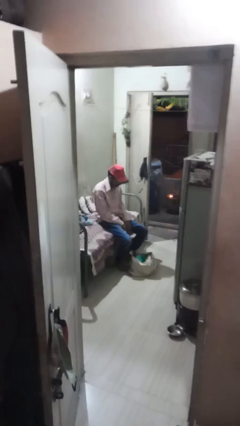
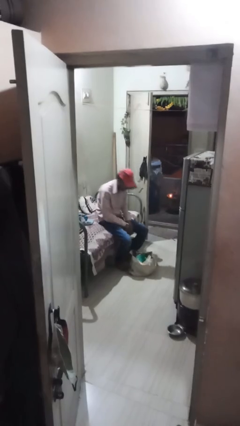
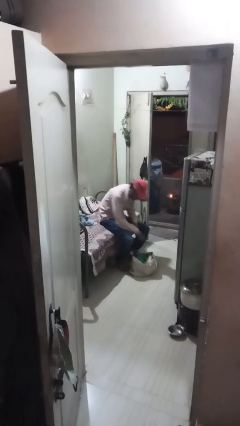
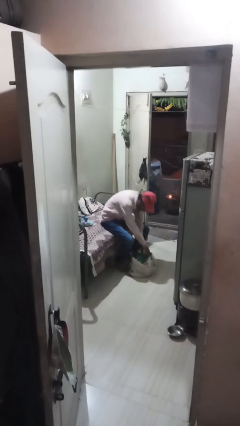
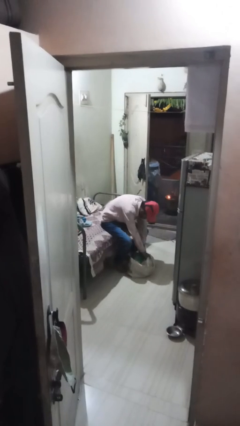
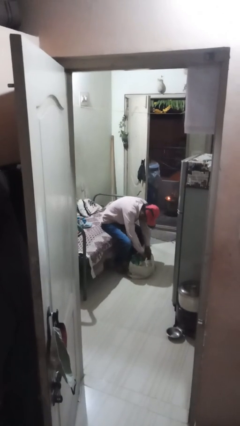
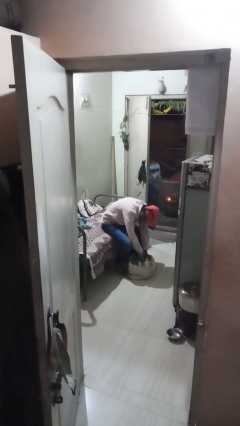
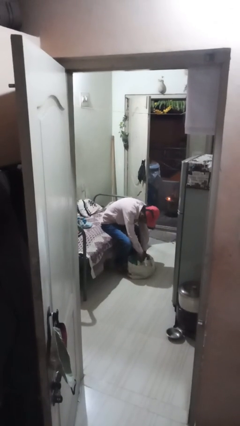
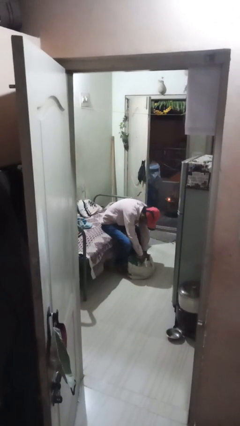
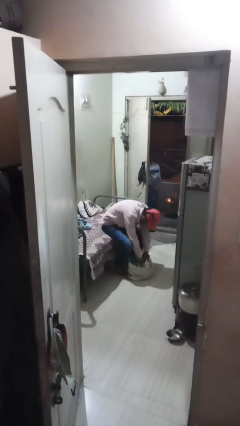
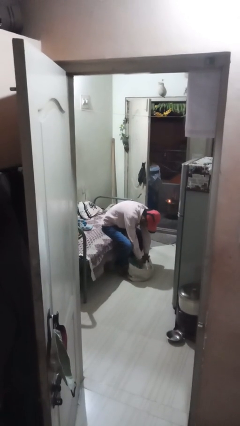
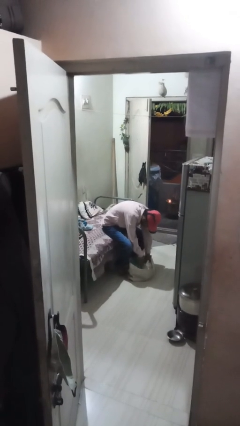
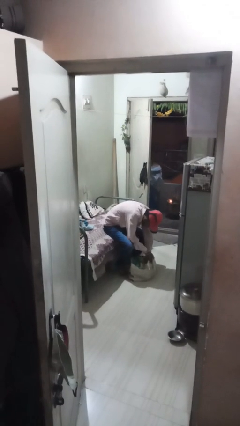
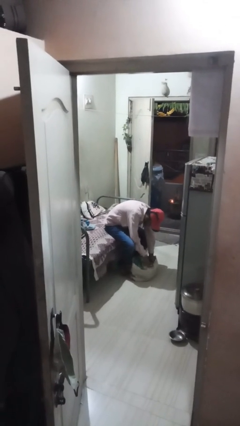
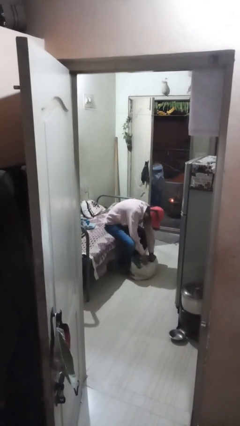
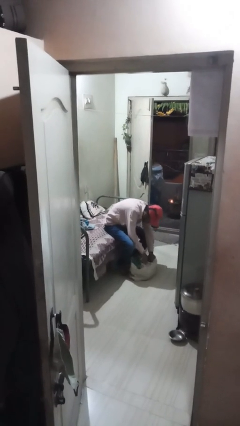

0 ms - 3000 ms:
person searches in bag

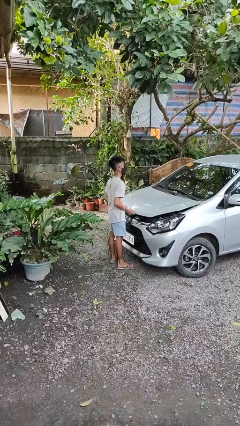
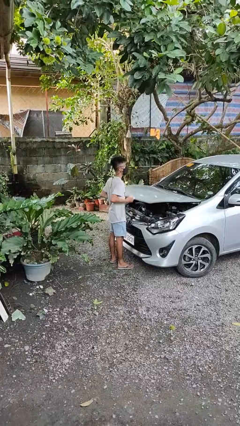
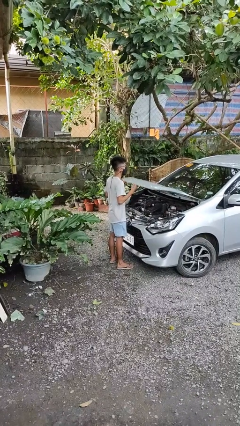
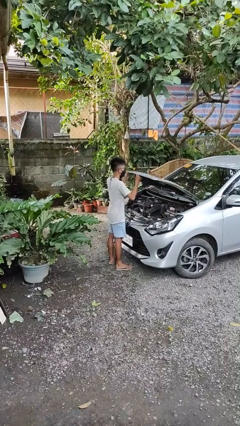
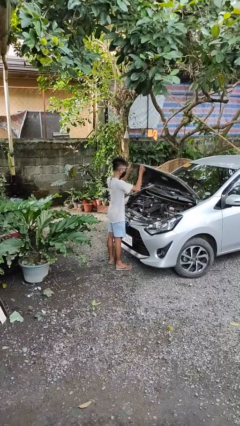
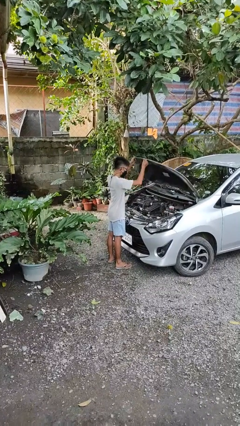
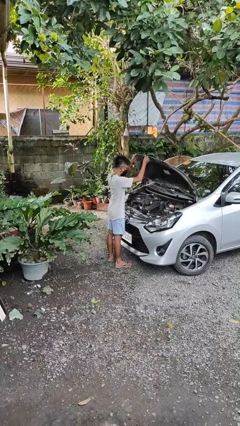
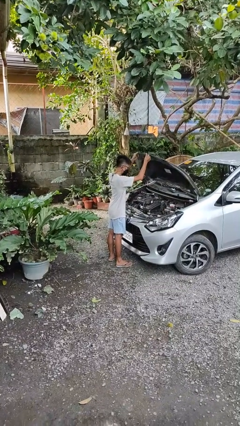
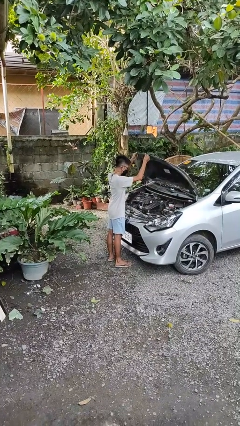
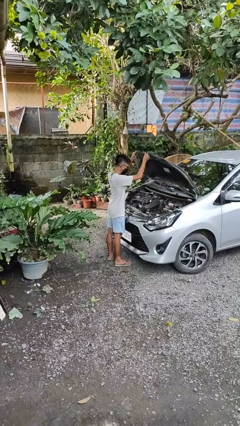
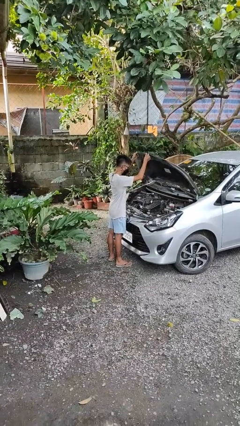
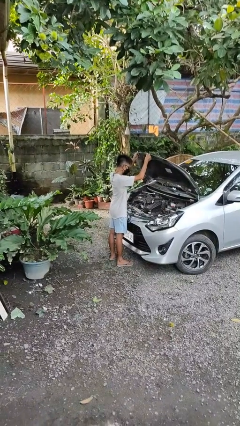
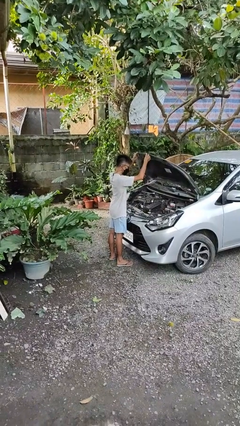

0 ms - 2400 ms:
person opens car hood

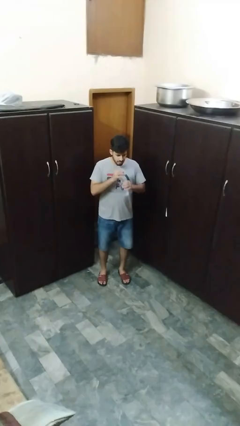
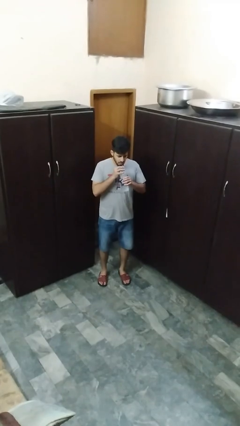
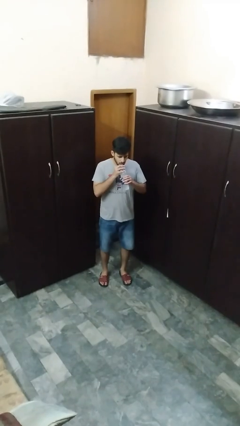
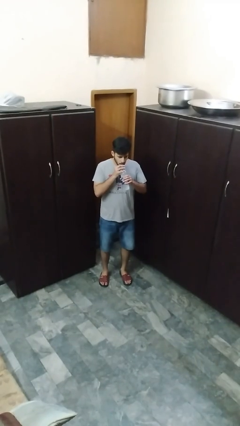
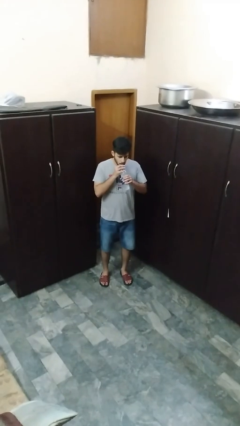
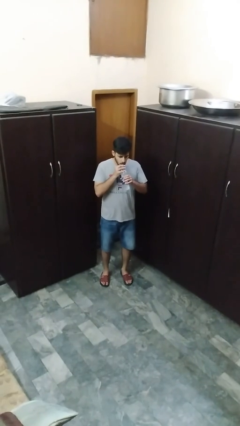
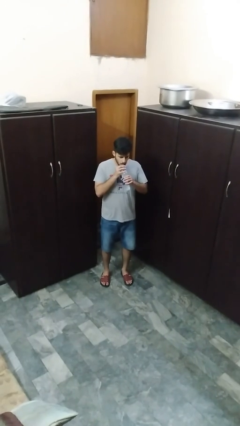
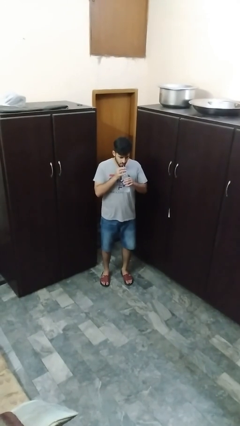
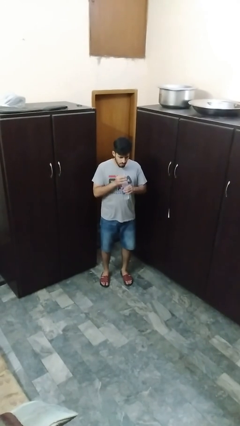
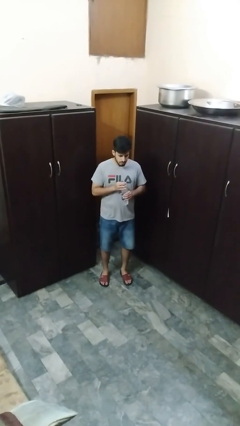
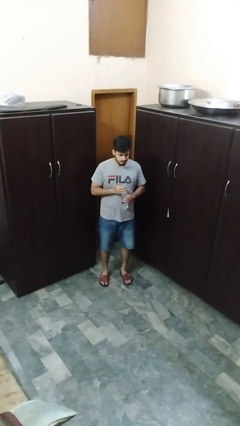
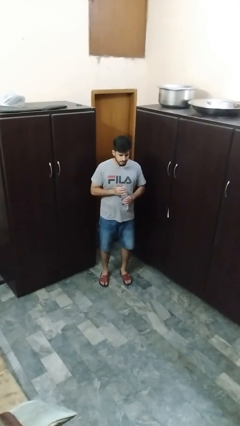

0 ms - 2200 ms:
person drinks from straw

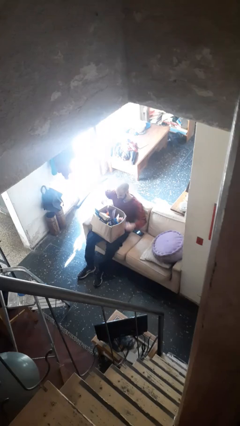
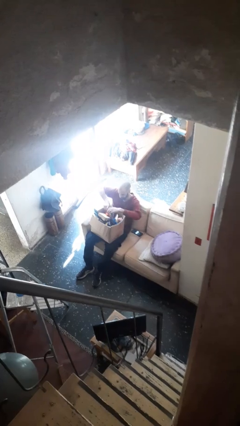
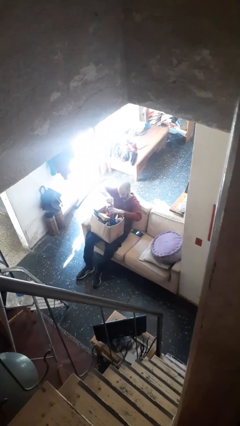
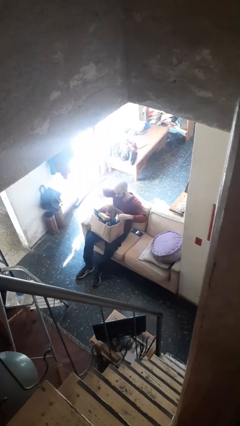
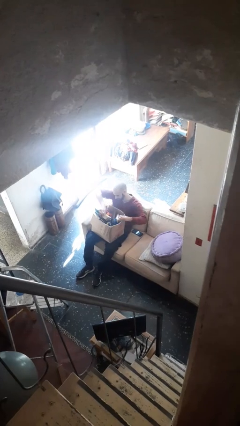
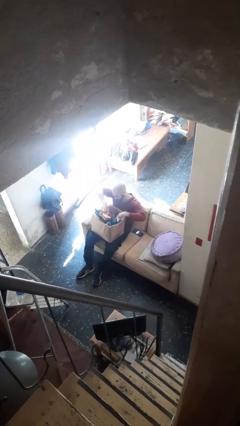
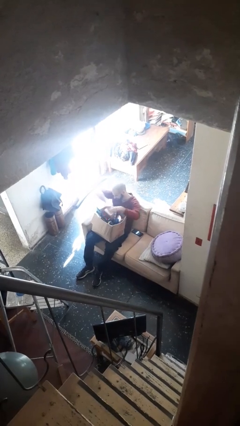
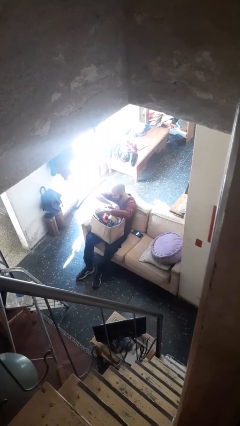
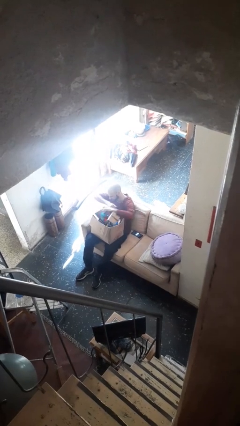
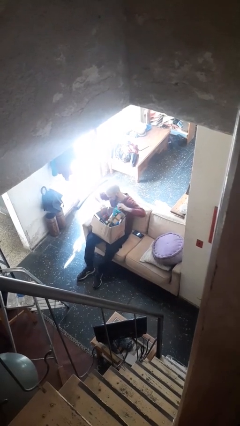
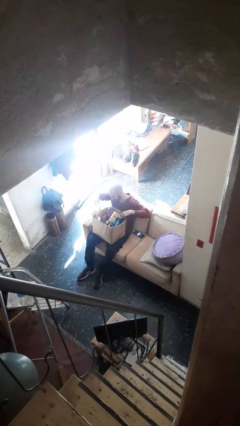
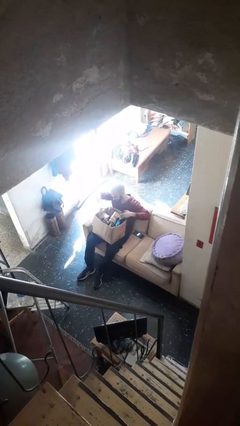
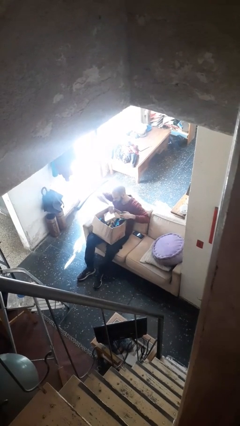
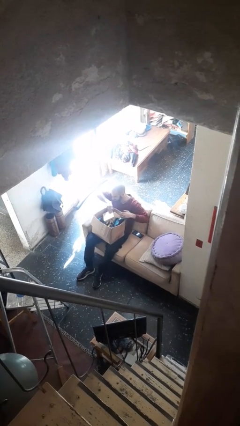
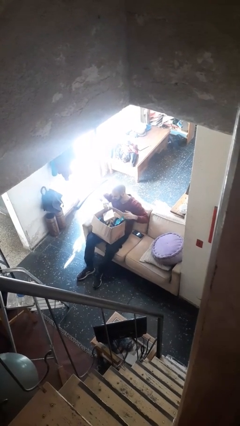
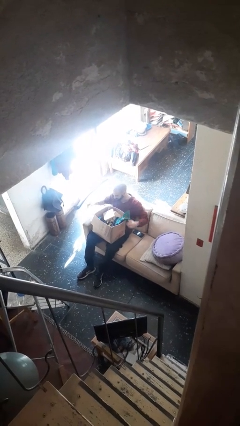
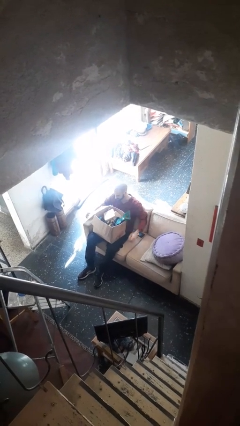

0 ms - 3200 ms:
person searches in box

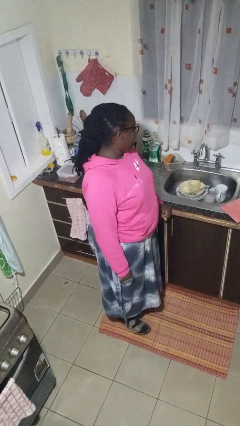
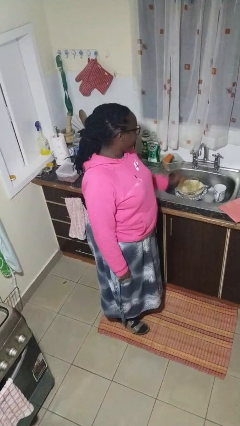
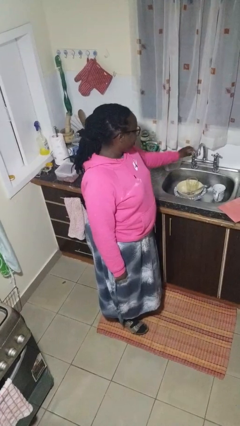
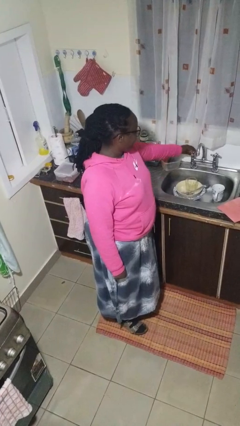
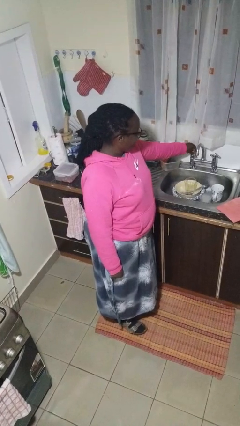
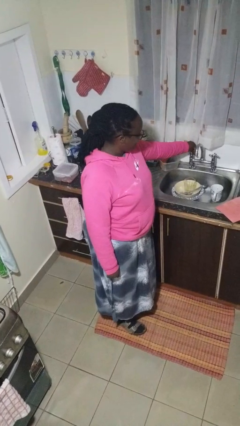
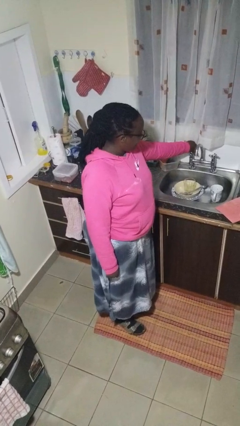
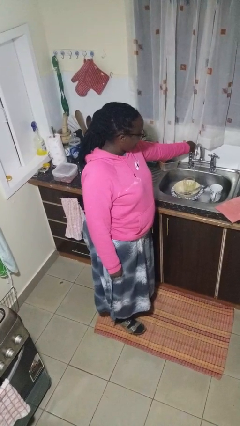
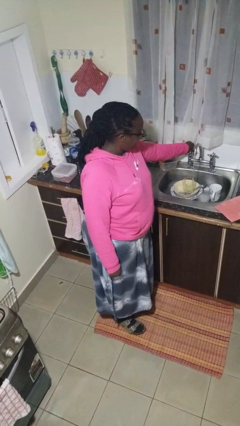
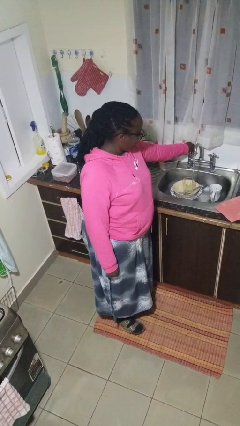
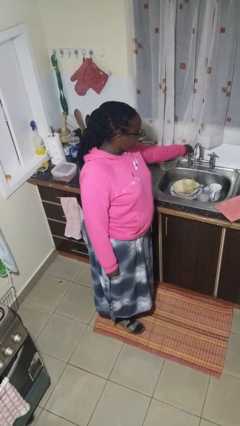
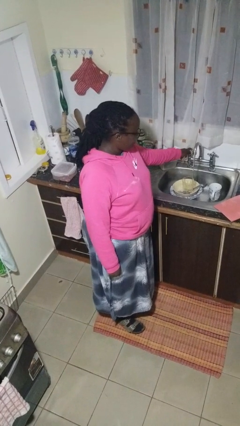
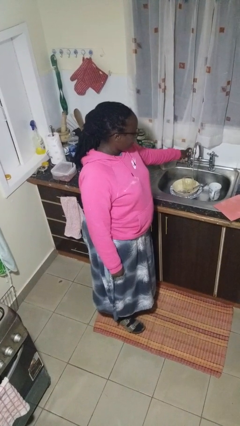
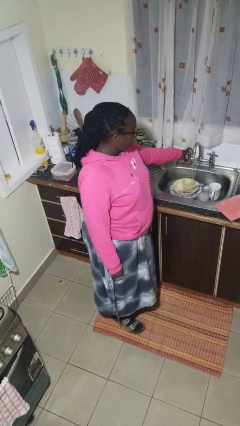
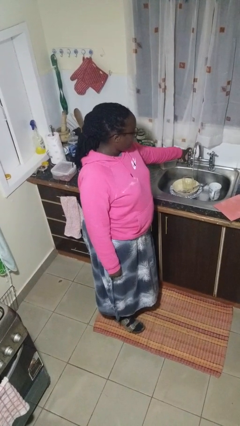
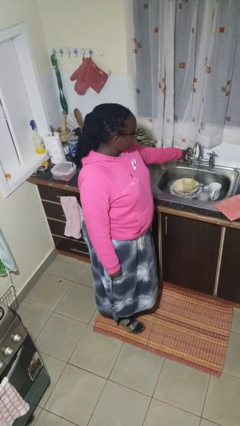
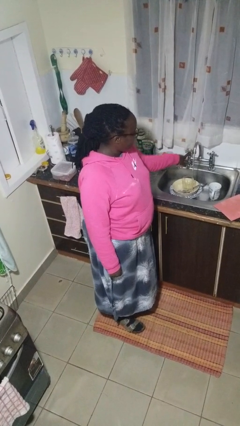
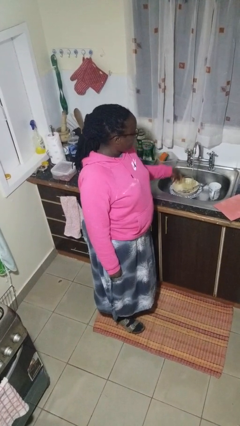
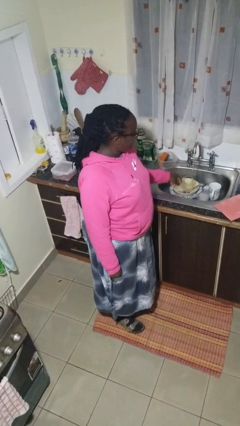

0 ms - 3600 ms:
person turns on faucet

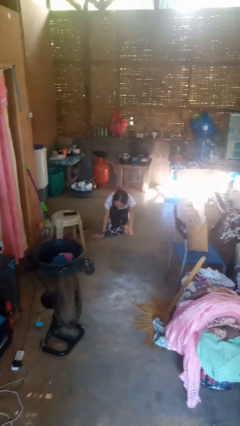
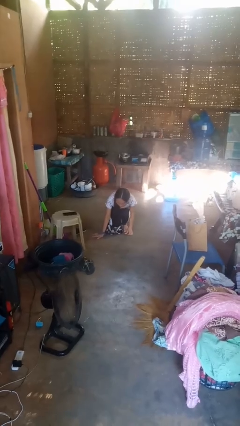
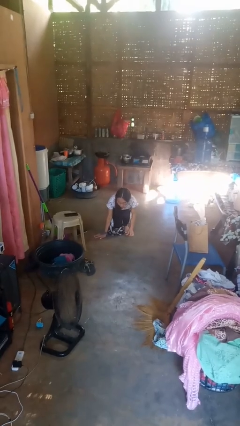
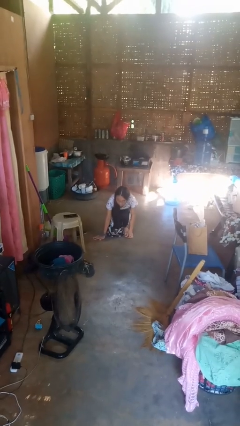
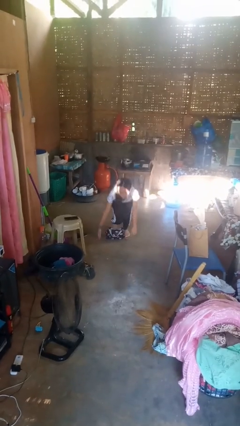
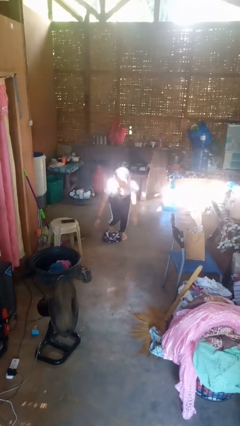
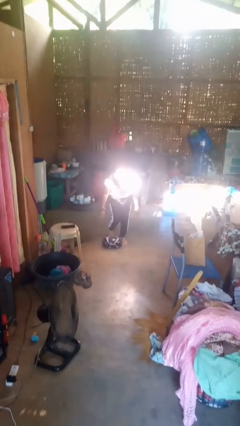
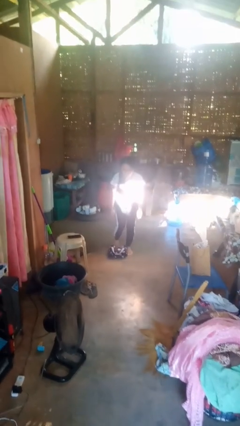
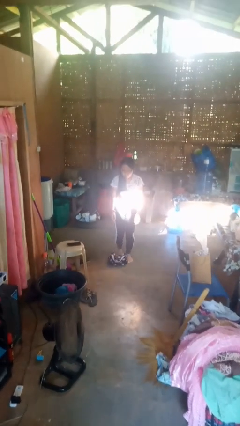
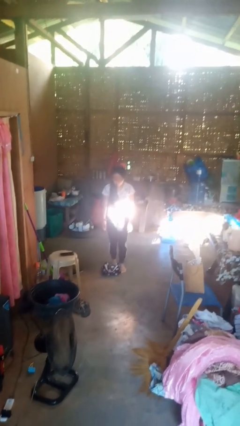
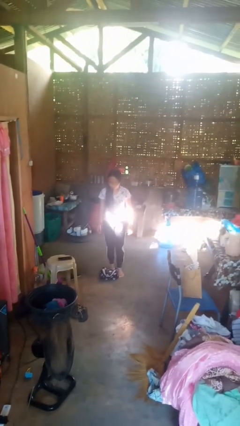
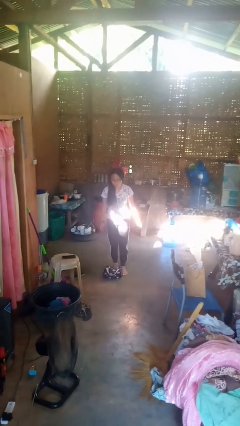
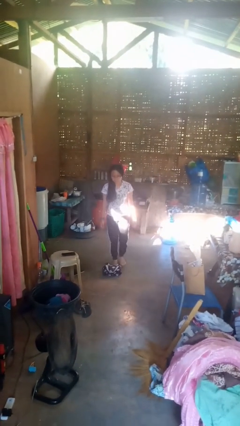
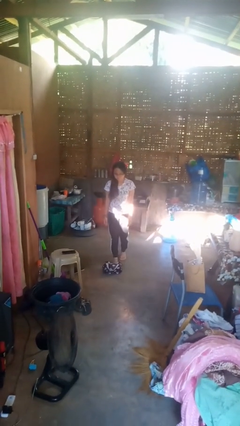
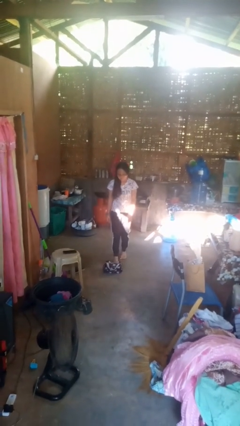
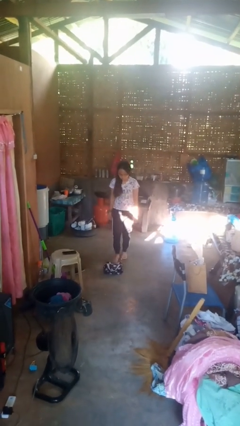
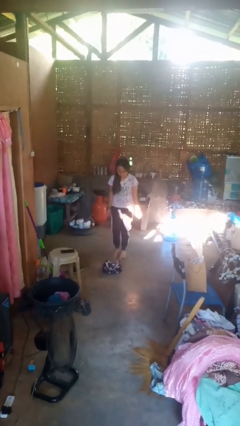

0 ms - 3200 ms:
person stands up from floor

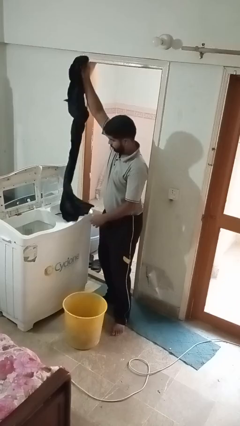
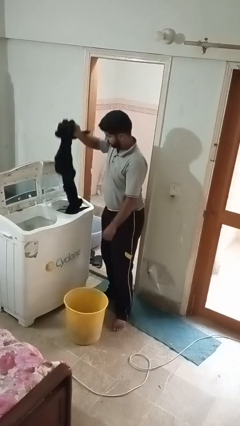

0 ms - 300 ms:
person loads dryer
